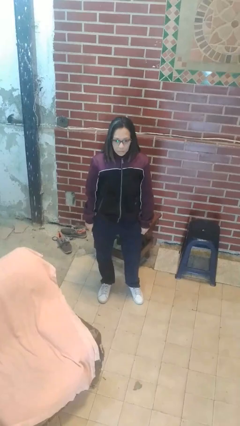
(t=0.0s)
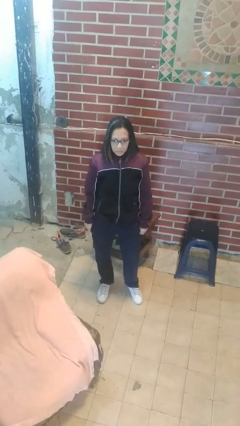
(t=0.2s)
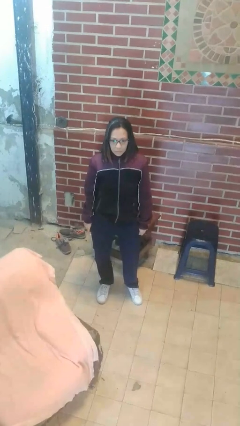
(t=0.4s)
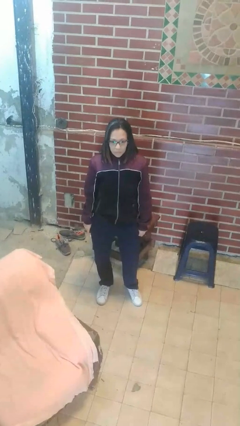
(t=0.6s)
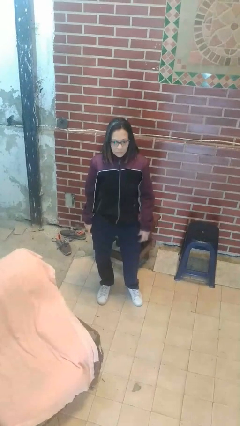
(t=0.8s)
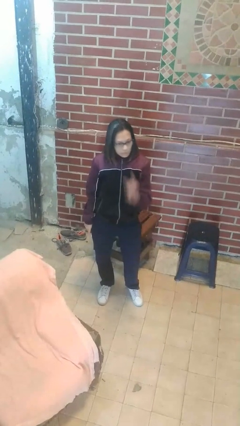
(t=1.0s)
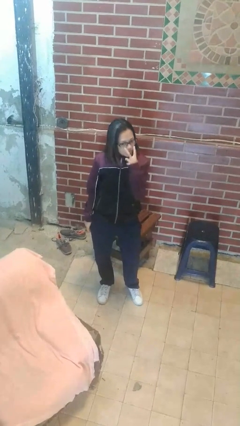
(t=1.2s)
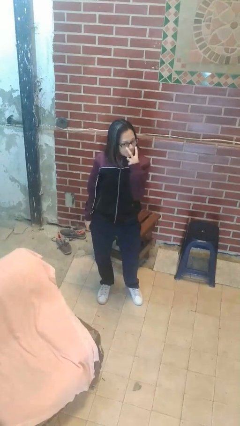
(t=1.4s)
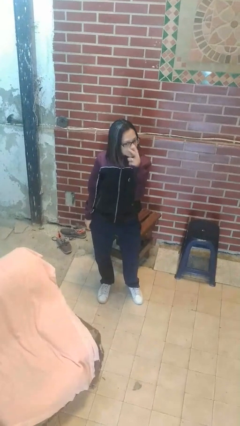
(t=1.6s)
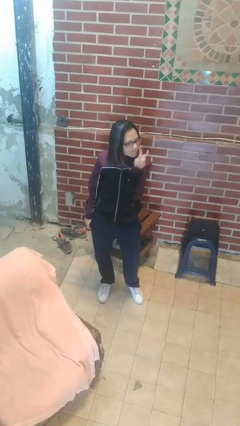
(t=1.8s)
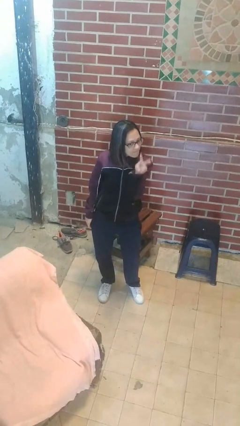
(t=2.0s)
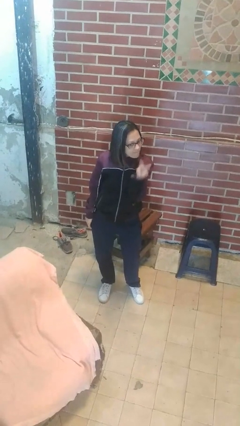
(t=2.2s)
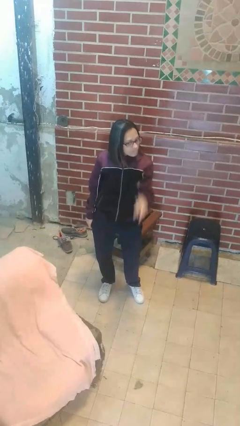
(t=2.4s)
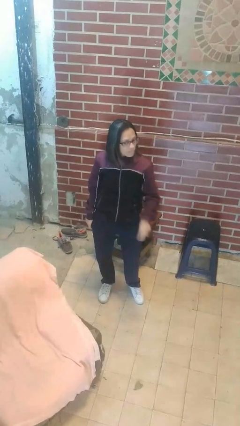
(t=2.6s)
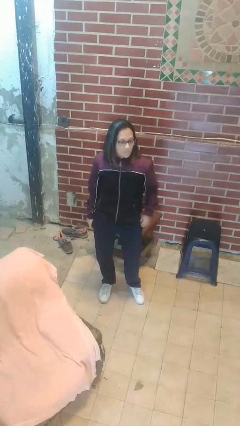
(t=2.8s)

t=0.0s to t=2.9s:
person gestures watch closely

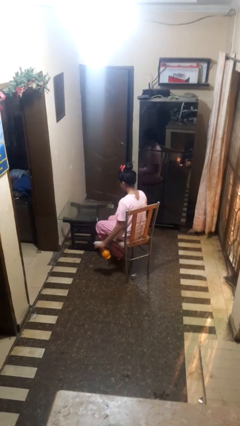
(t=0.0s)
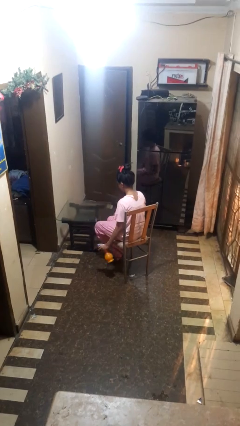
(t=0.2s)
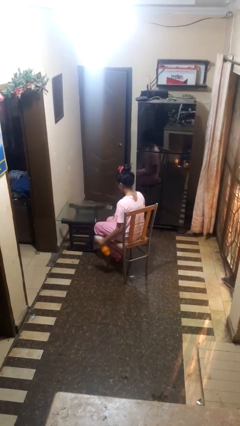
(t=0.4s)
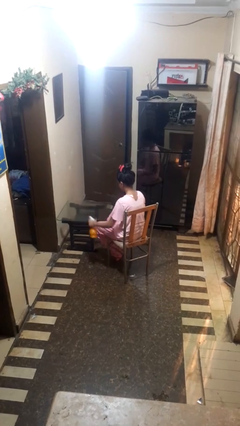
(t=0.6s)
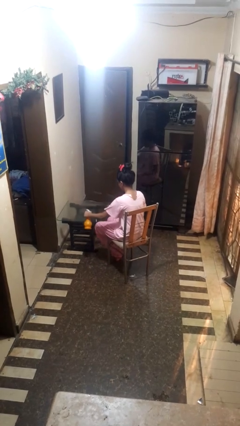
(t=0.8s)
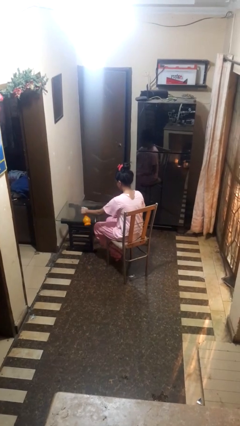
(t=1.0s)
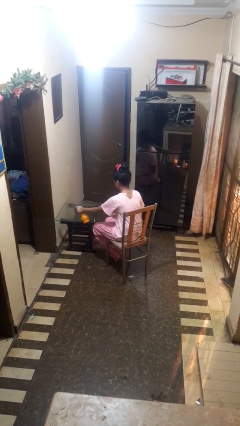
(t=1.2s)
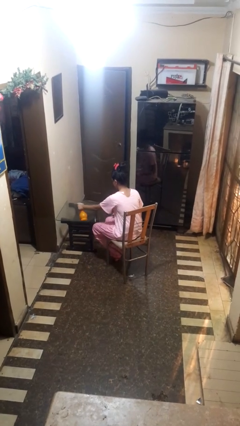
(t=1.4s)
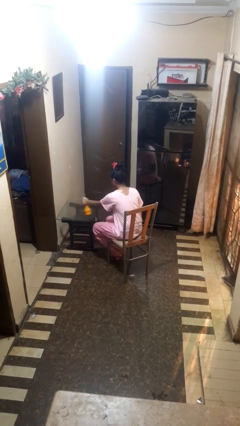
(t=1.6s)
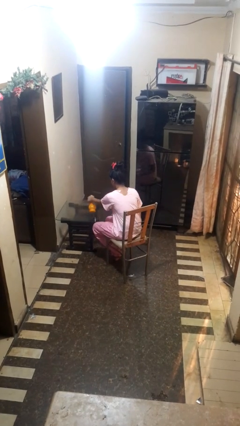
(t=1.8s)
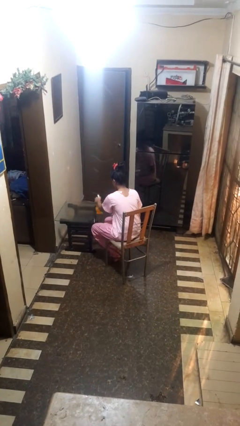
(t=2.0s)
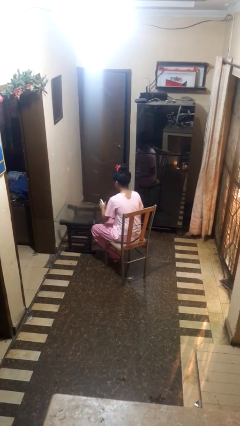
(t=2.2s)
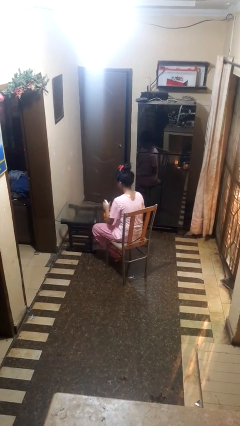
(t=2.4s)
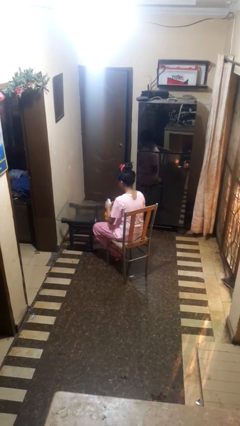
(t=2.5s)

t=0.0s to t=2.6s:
person sprays from bottle

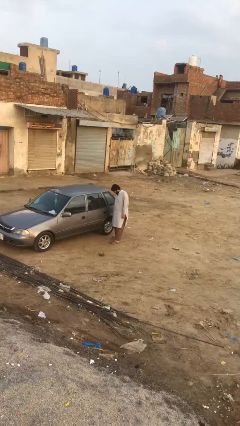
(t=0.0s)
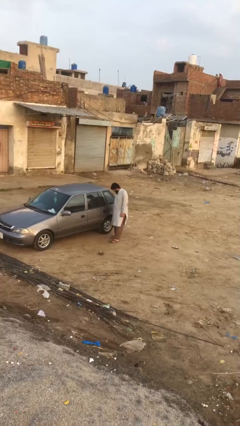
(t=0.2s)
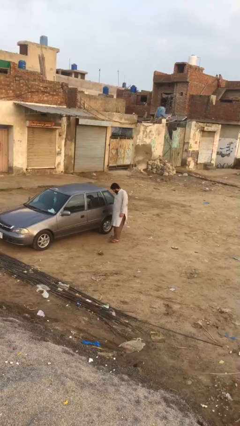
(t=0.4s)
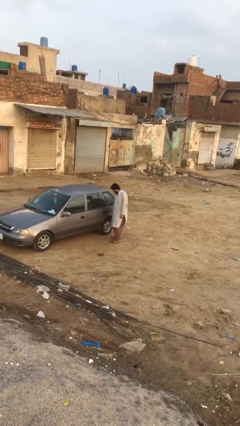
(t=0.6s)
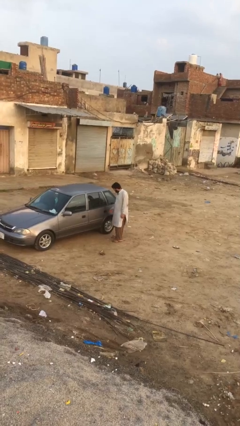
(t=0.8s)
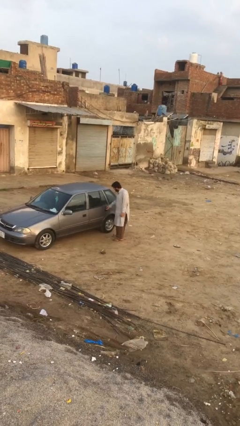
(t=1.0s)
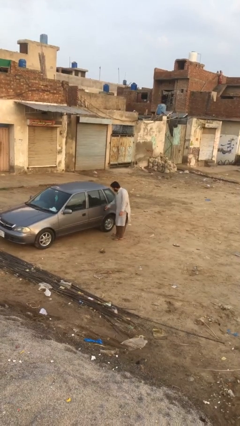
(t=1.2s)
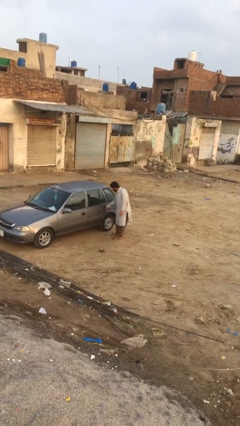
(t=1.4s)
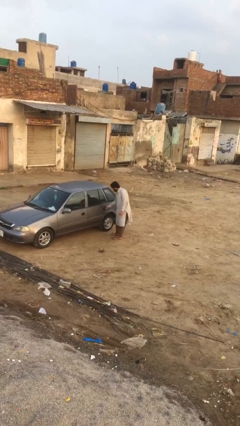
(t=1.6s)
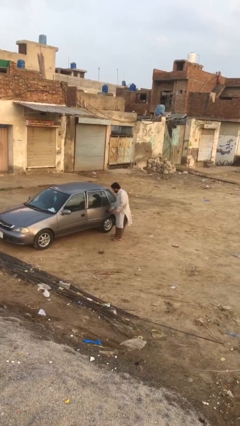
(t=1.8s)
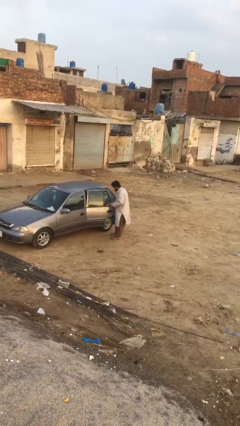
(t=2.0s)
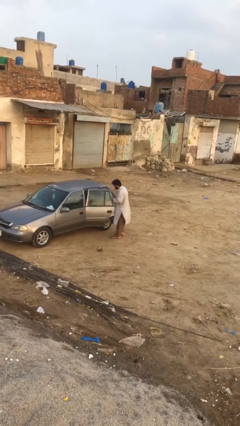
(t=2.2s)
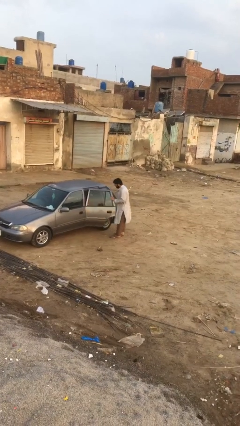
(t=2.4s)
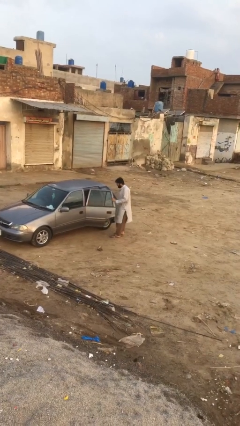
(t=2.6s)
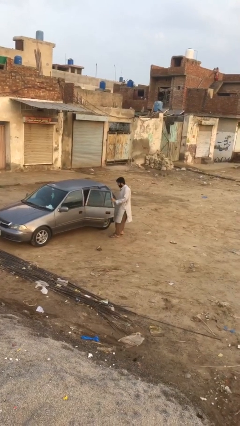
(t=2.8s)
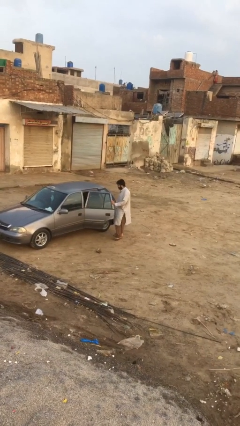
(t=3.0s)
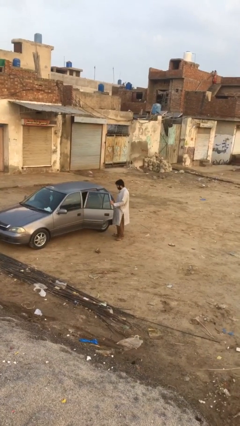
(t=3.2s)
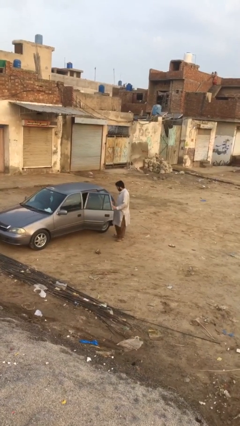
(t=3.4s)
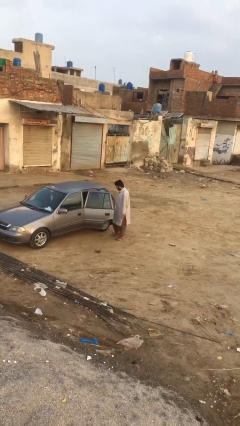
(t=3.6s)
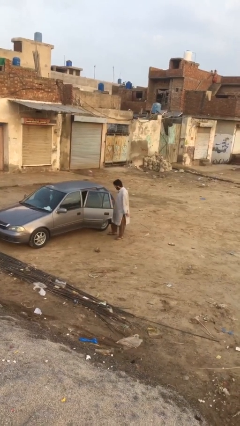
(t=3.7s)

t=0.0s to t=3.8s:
person opens car door

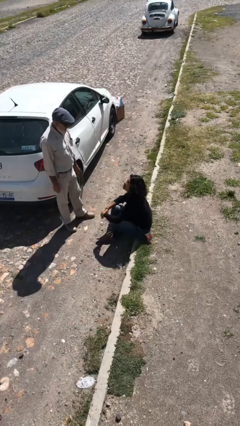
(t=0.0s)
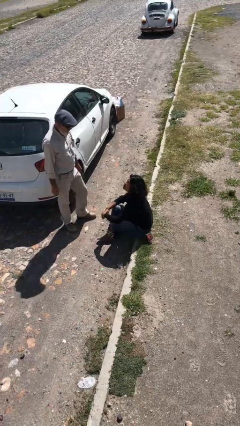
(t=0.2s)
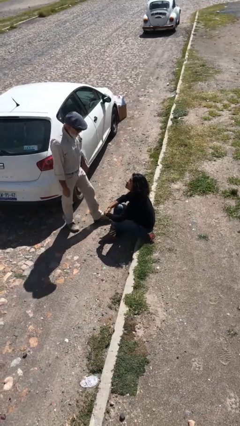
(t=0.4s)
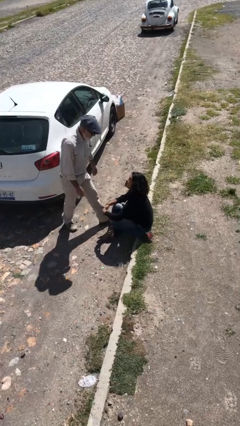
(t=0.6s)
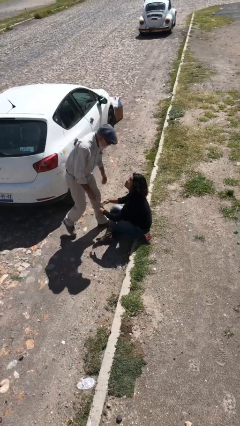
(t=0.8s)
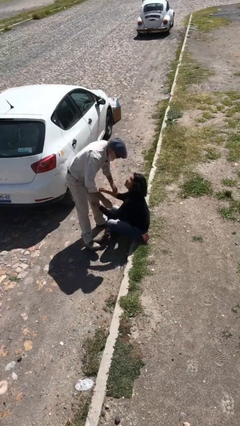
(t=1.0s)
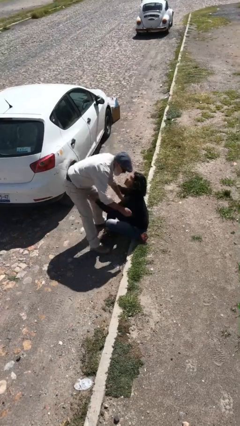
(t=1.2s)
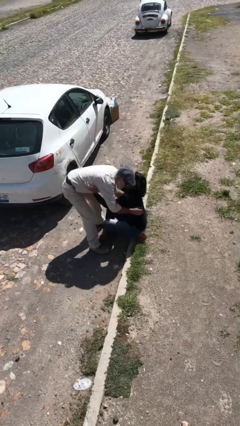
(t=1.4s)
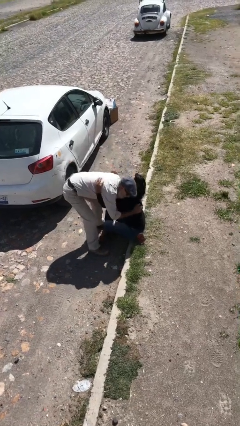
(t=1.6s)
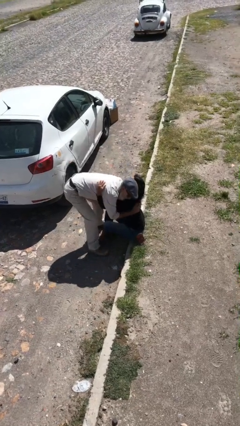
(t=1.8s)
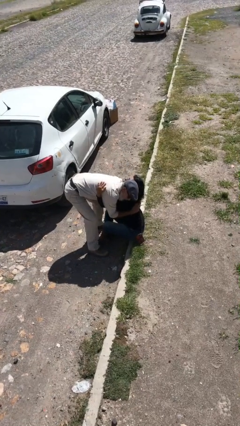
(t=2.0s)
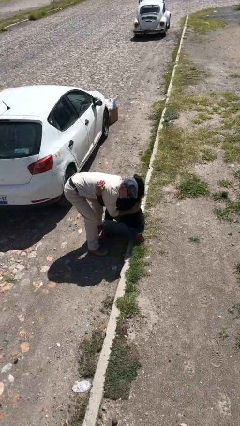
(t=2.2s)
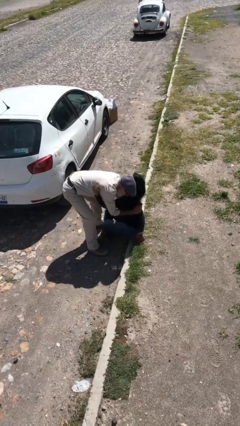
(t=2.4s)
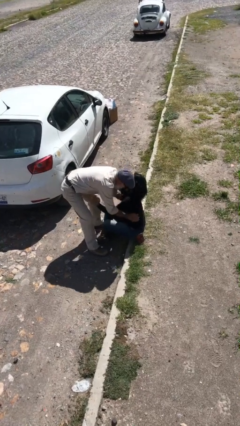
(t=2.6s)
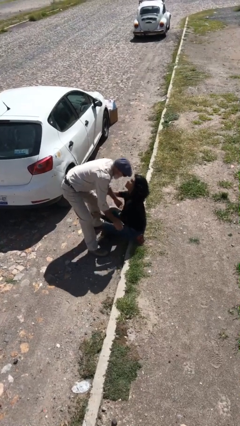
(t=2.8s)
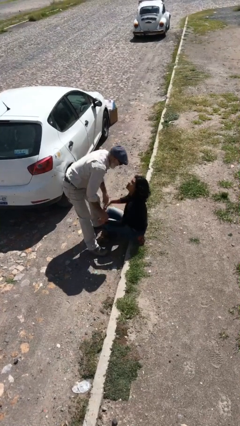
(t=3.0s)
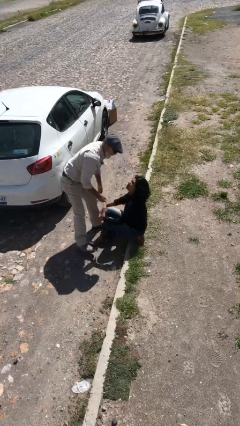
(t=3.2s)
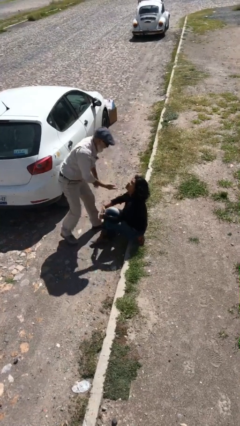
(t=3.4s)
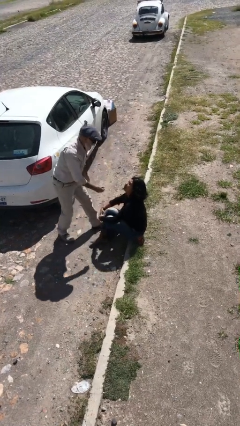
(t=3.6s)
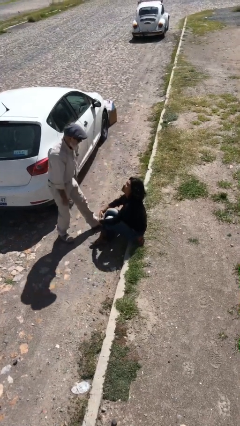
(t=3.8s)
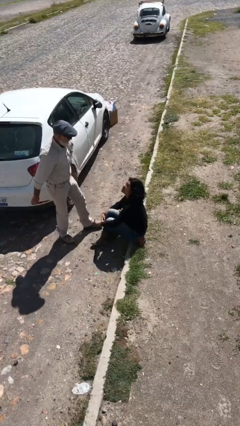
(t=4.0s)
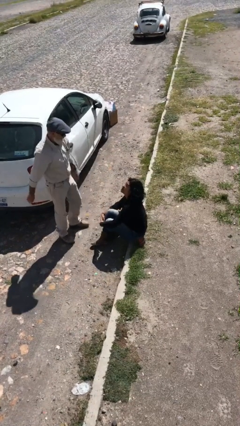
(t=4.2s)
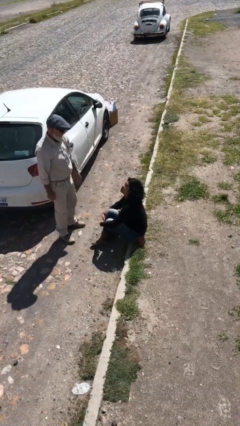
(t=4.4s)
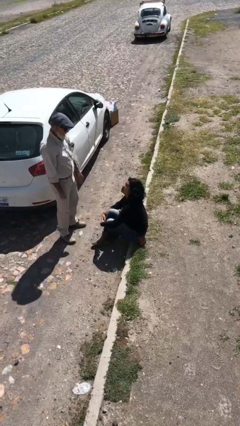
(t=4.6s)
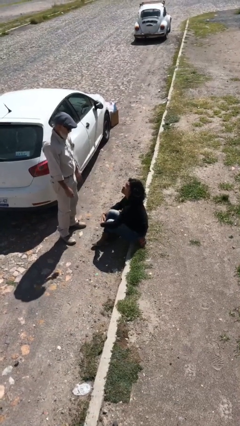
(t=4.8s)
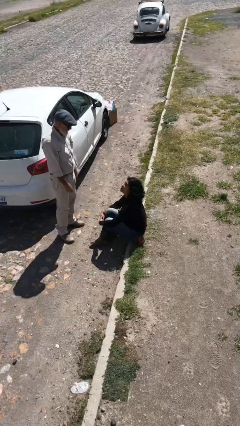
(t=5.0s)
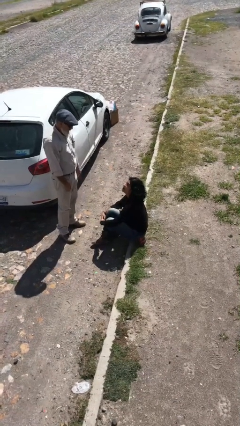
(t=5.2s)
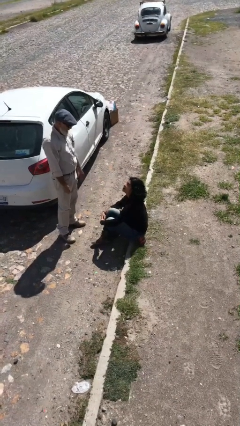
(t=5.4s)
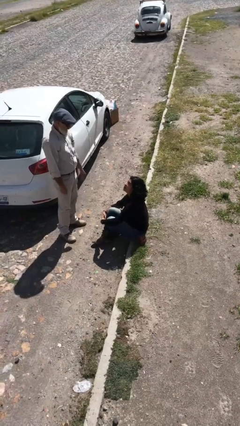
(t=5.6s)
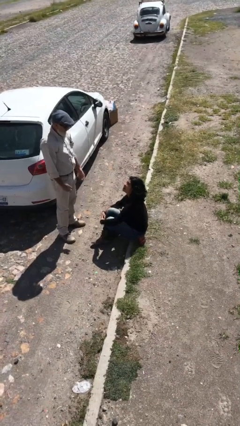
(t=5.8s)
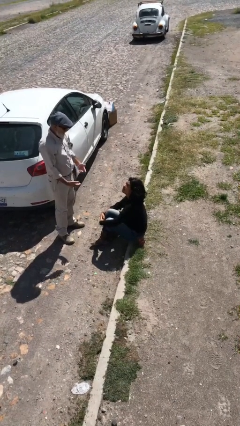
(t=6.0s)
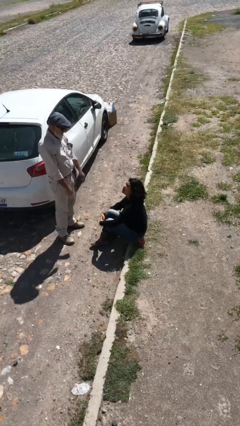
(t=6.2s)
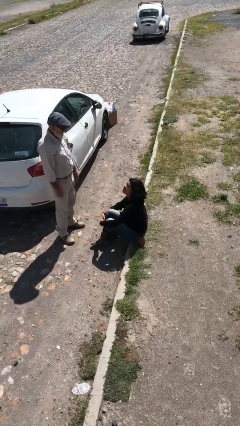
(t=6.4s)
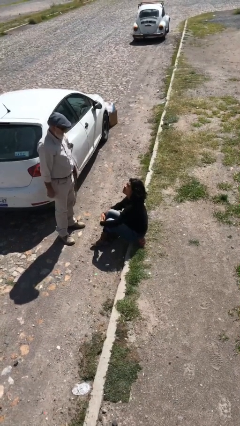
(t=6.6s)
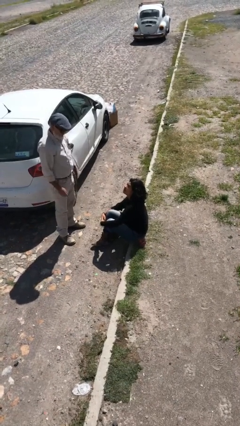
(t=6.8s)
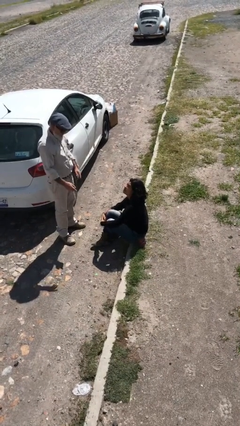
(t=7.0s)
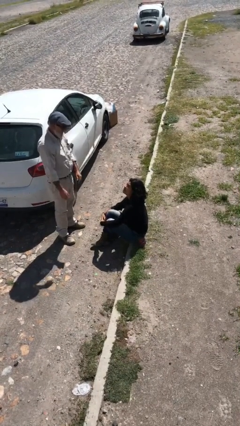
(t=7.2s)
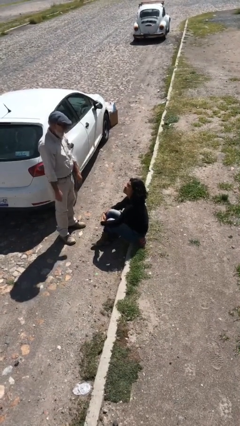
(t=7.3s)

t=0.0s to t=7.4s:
person embraces person

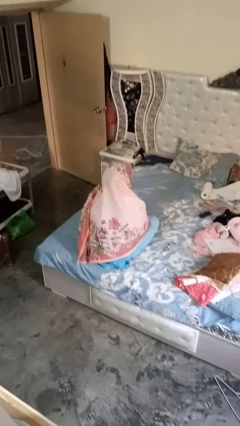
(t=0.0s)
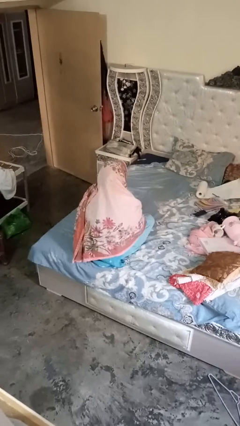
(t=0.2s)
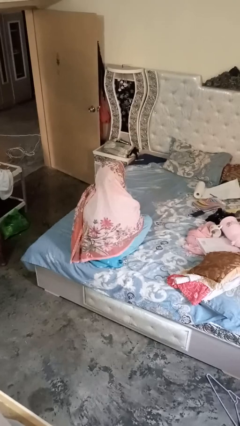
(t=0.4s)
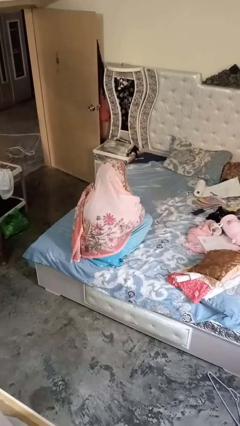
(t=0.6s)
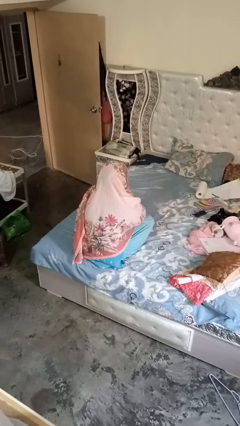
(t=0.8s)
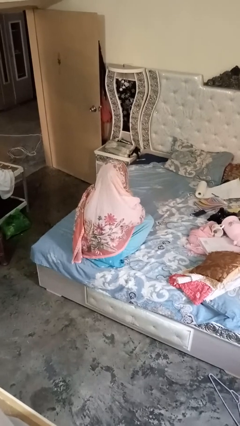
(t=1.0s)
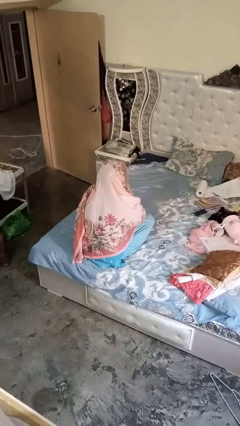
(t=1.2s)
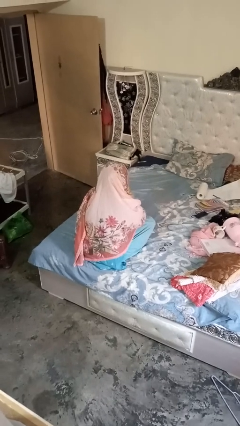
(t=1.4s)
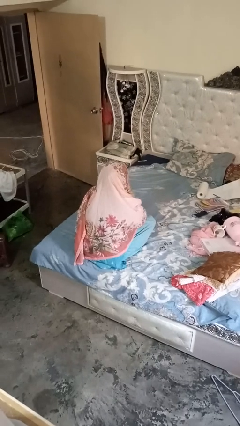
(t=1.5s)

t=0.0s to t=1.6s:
person blows nose
